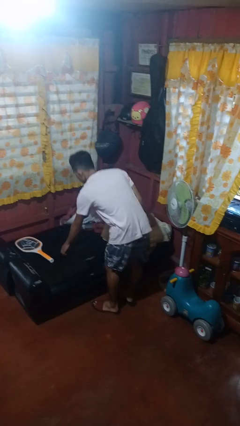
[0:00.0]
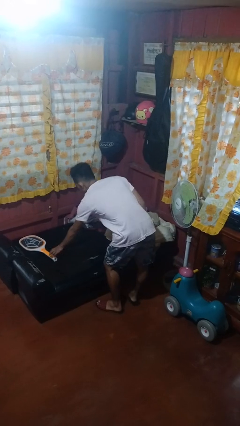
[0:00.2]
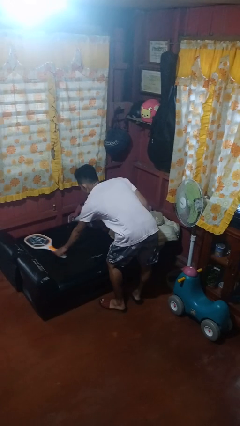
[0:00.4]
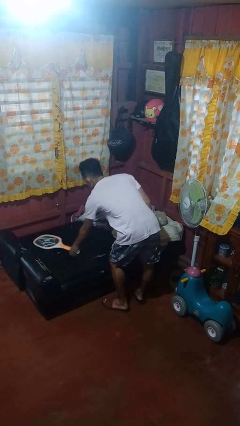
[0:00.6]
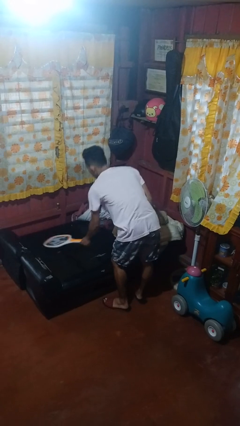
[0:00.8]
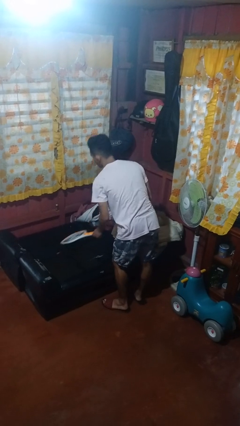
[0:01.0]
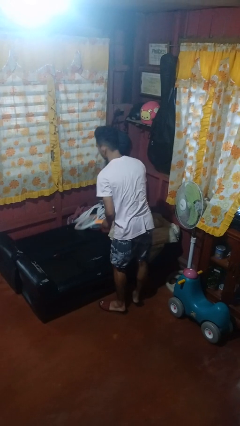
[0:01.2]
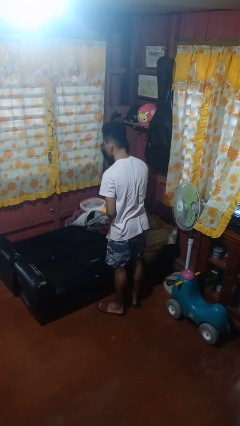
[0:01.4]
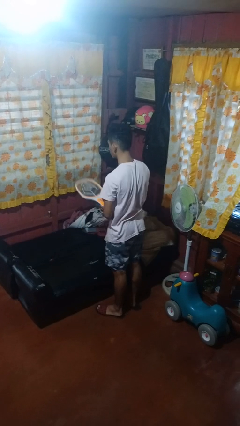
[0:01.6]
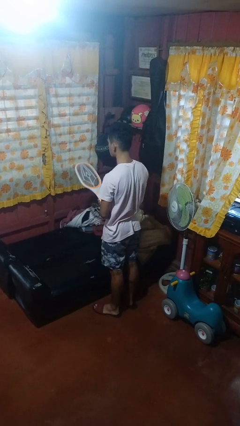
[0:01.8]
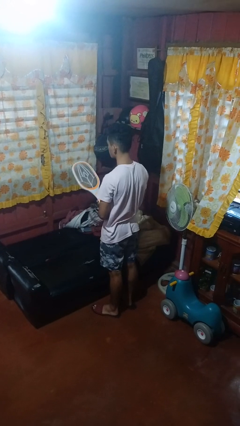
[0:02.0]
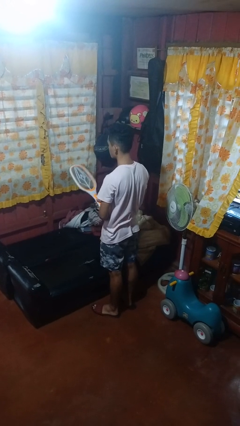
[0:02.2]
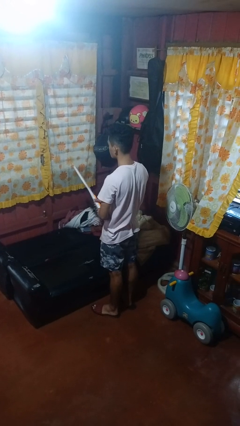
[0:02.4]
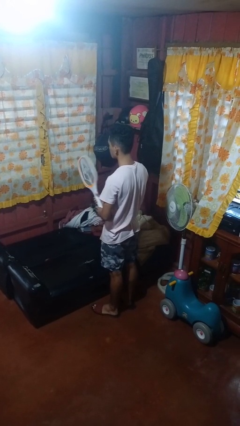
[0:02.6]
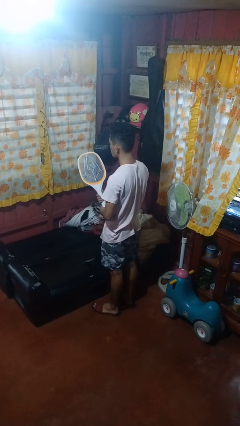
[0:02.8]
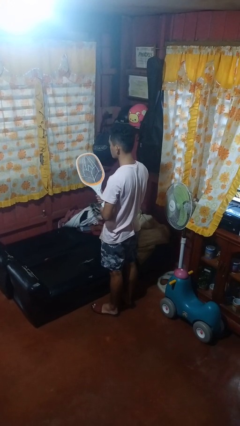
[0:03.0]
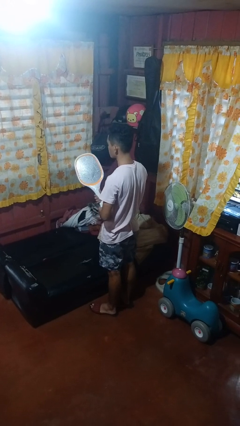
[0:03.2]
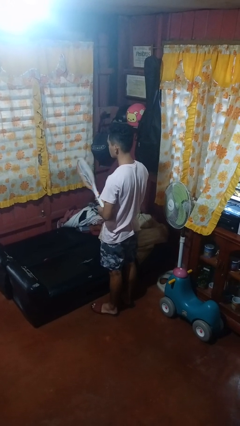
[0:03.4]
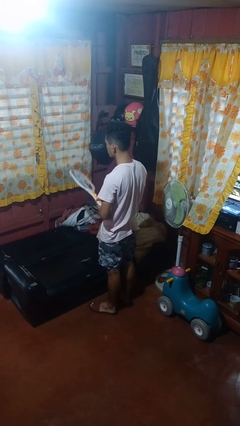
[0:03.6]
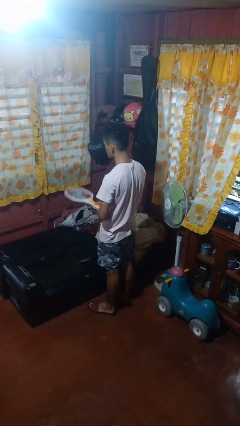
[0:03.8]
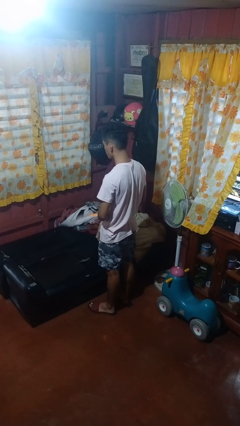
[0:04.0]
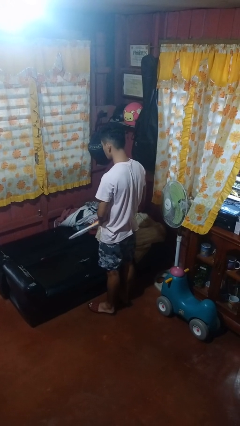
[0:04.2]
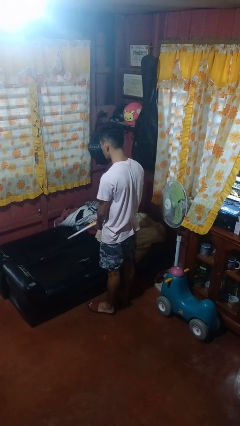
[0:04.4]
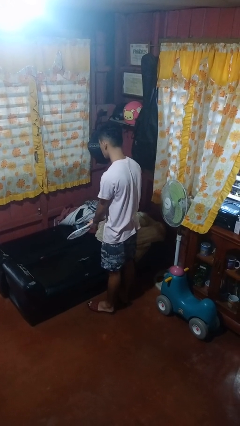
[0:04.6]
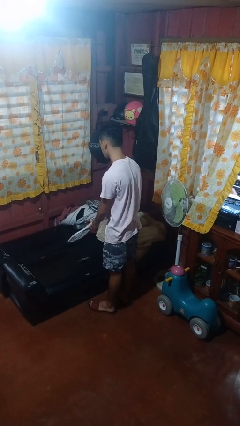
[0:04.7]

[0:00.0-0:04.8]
person picks up object from couch

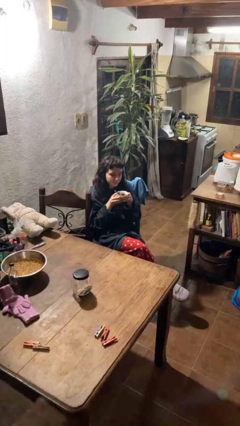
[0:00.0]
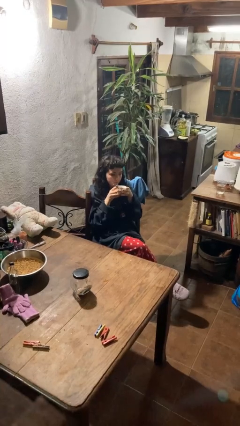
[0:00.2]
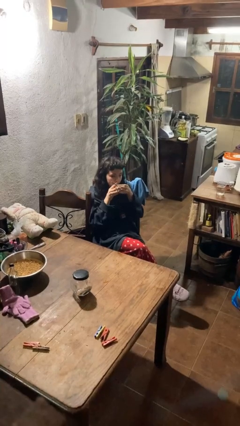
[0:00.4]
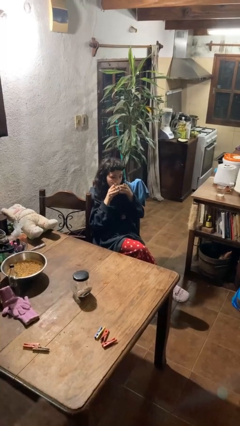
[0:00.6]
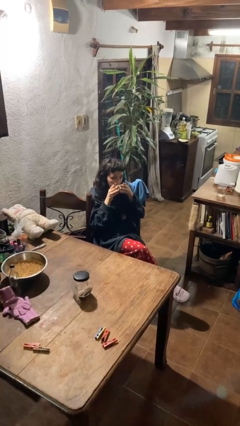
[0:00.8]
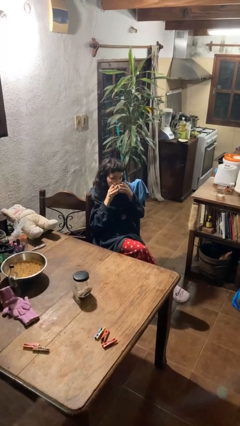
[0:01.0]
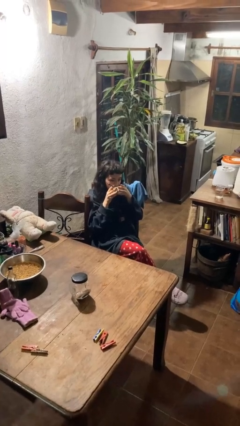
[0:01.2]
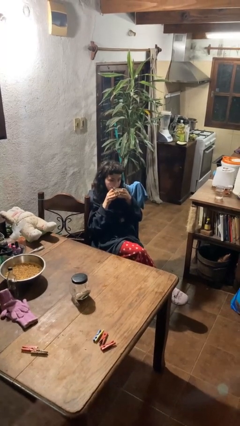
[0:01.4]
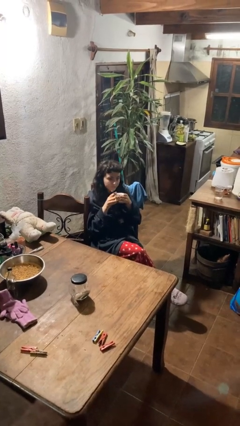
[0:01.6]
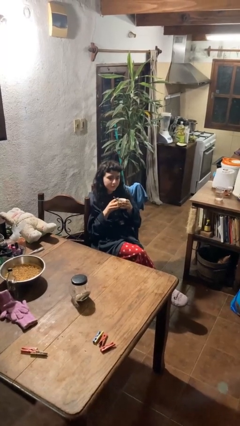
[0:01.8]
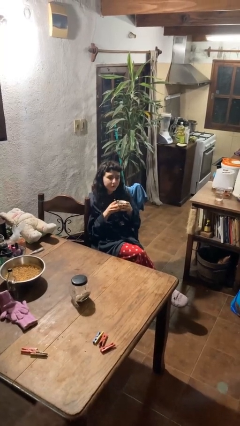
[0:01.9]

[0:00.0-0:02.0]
person drinks from mug

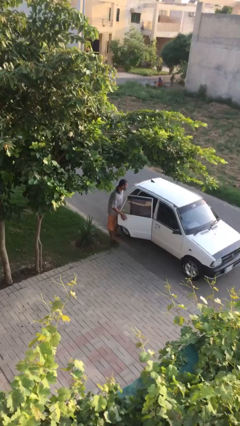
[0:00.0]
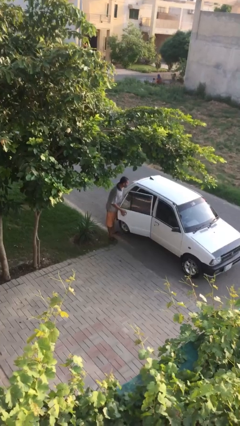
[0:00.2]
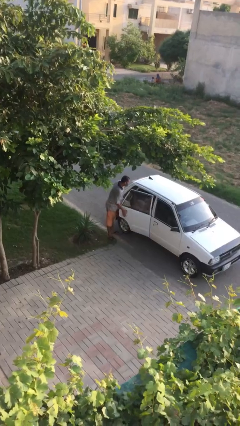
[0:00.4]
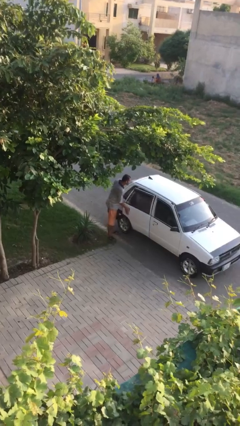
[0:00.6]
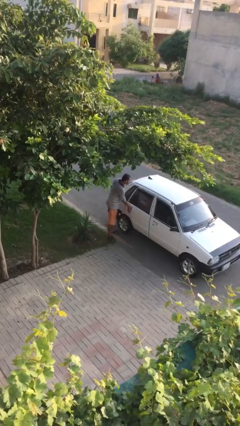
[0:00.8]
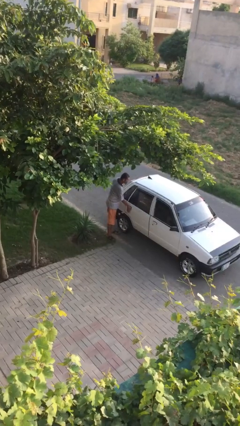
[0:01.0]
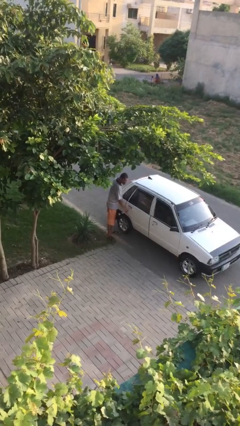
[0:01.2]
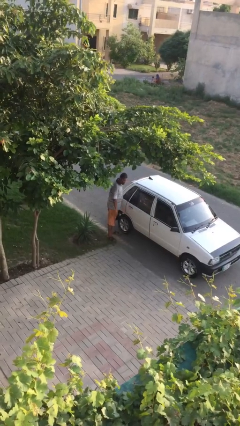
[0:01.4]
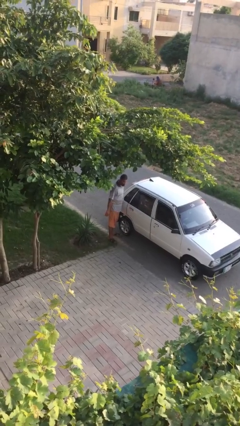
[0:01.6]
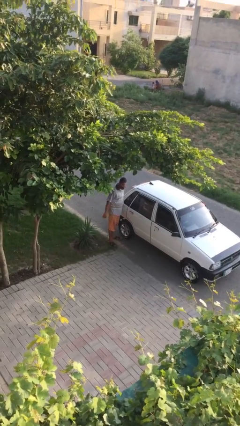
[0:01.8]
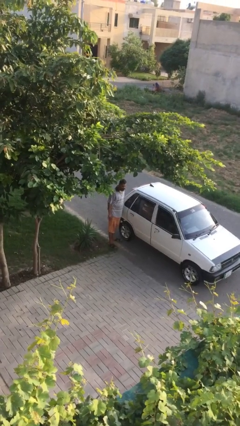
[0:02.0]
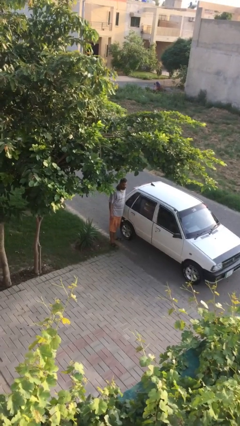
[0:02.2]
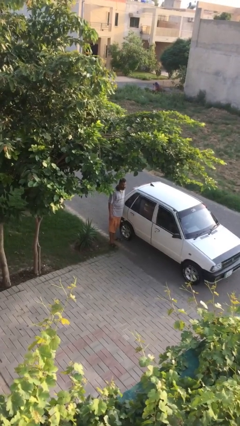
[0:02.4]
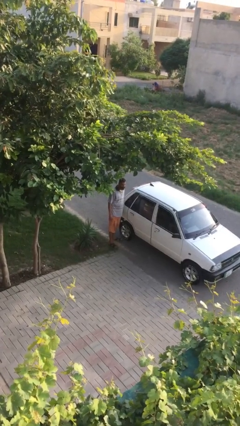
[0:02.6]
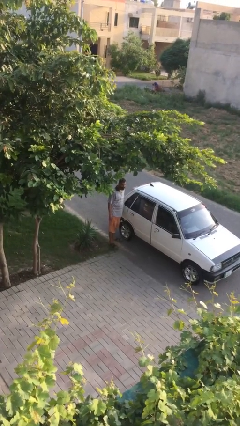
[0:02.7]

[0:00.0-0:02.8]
person closes car door

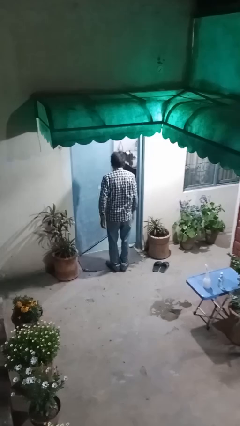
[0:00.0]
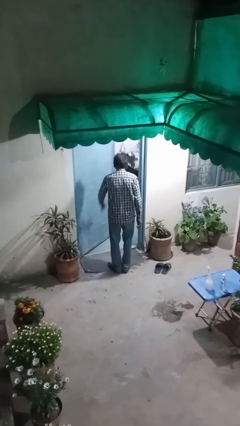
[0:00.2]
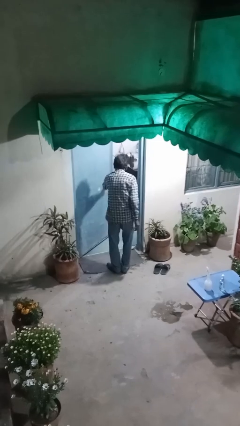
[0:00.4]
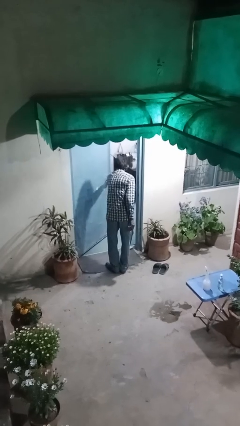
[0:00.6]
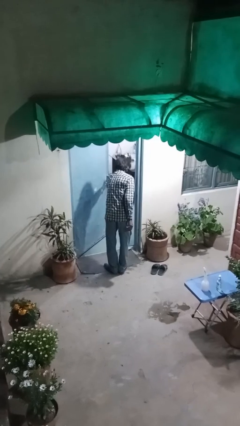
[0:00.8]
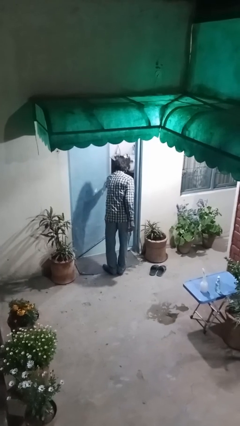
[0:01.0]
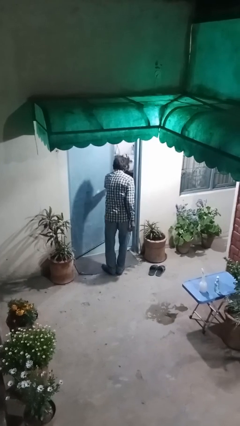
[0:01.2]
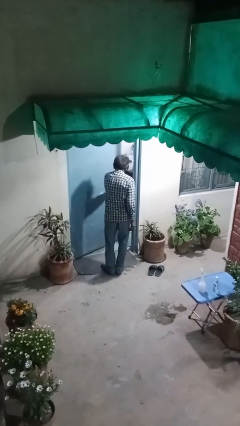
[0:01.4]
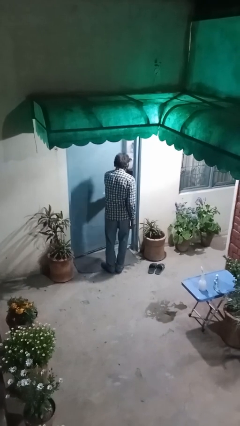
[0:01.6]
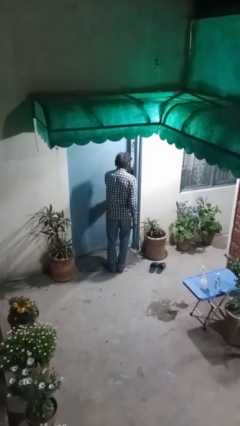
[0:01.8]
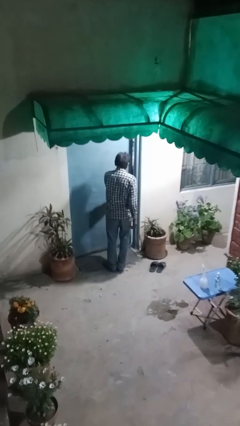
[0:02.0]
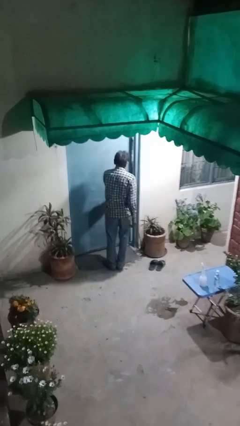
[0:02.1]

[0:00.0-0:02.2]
person closes facility door

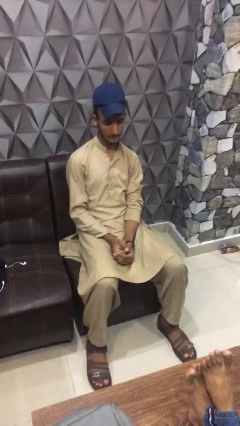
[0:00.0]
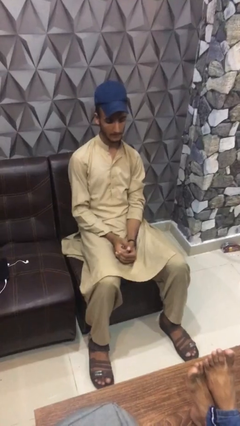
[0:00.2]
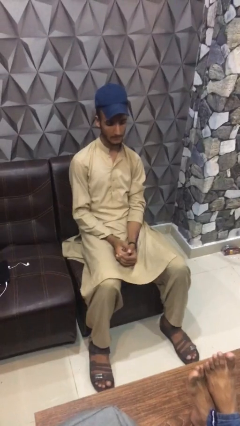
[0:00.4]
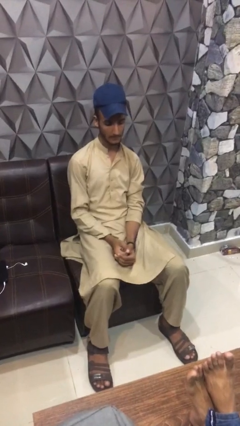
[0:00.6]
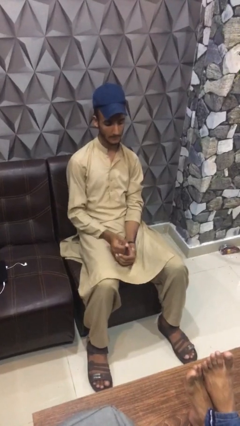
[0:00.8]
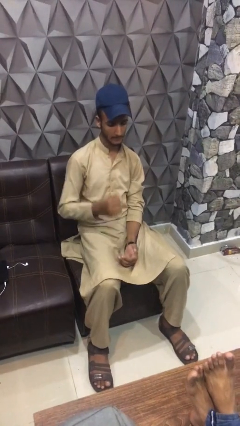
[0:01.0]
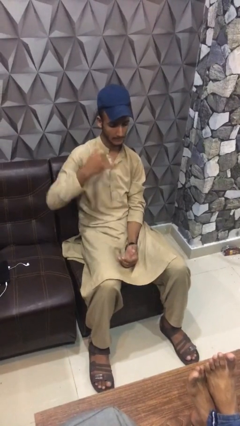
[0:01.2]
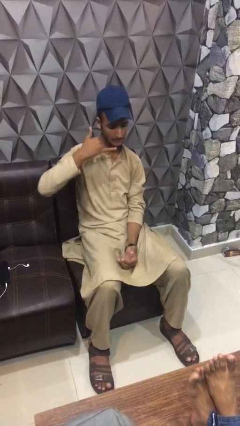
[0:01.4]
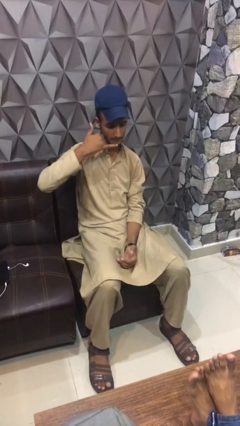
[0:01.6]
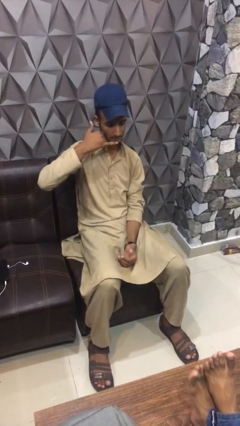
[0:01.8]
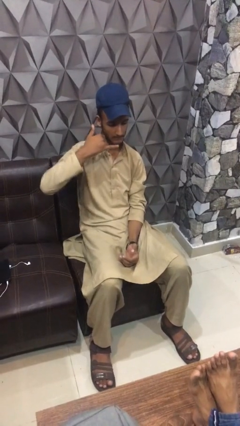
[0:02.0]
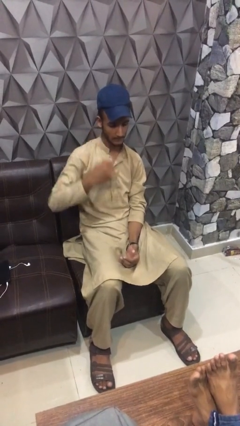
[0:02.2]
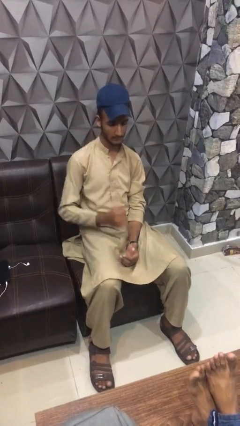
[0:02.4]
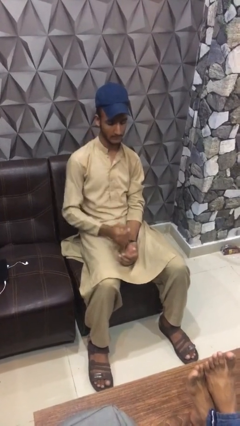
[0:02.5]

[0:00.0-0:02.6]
person gestures call me

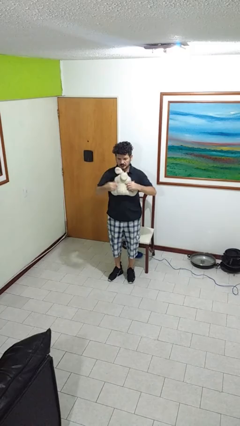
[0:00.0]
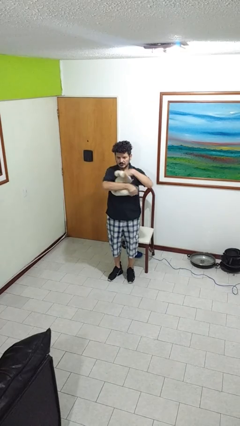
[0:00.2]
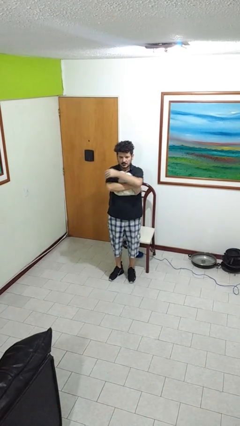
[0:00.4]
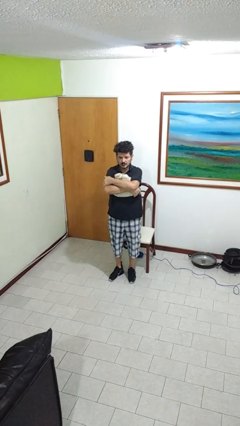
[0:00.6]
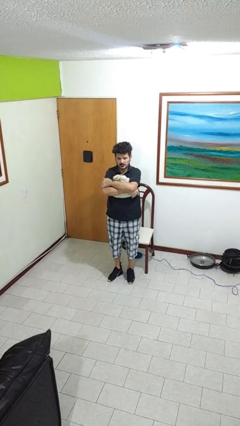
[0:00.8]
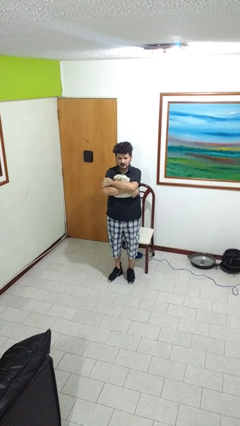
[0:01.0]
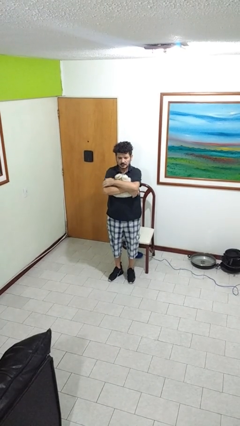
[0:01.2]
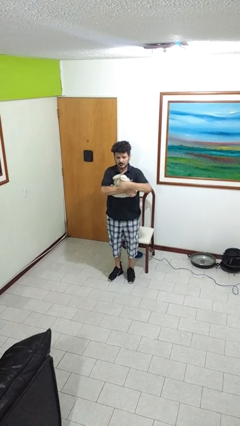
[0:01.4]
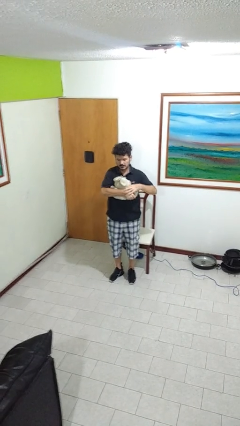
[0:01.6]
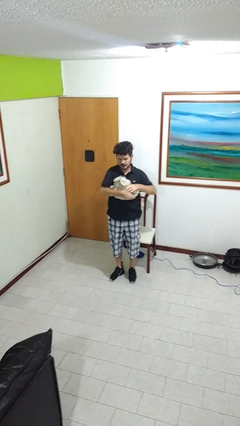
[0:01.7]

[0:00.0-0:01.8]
person hugs stuffed animal

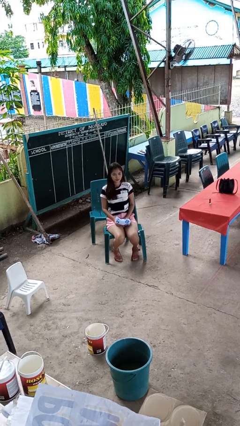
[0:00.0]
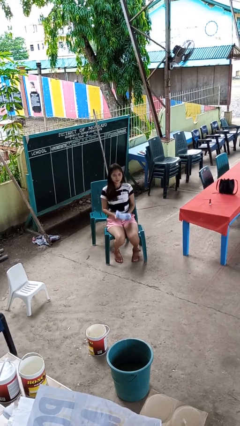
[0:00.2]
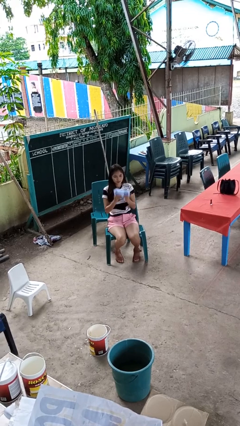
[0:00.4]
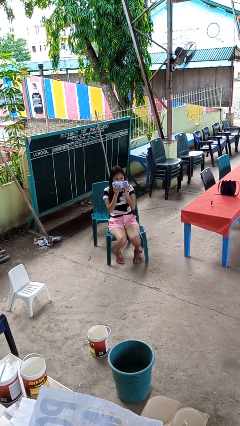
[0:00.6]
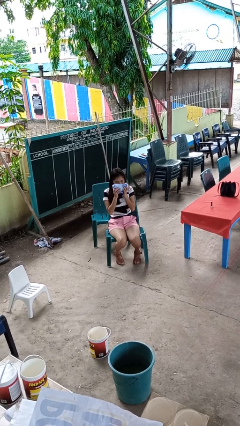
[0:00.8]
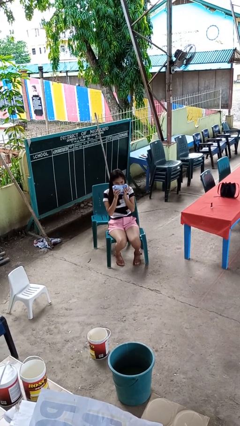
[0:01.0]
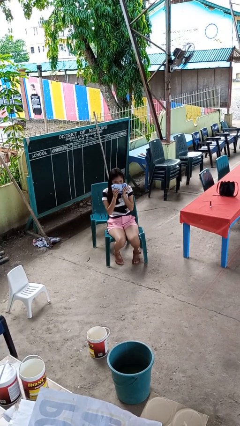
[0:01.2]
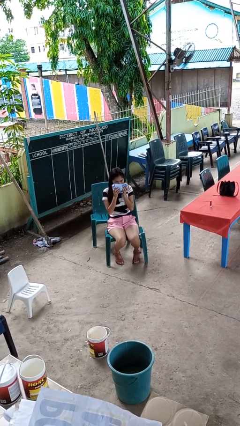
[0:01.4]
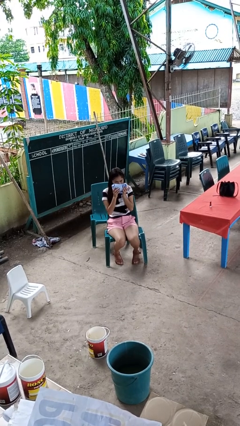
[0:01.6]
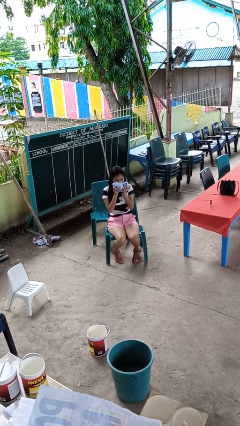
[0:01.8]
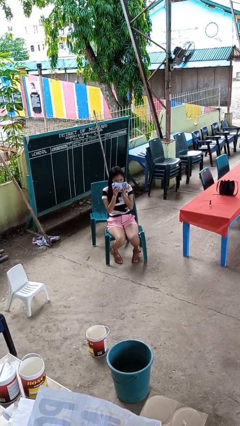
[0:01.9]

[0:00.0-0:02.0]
person blows nose
